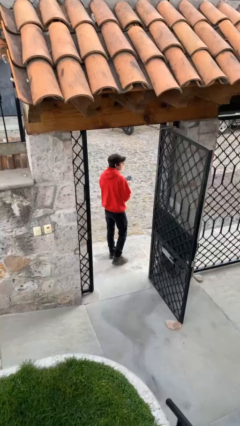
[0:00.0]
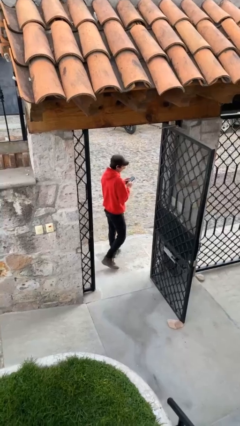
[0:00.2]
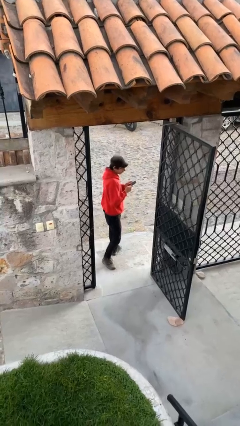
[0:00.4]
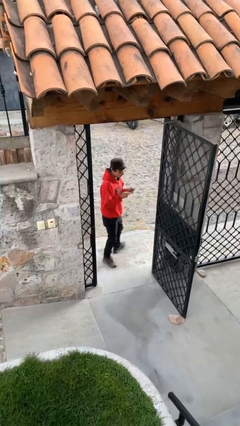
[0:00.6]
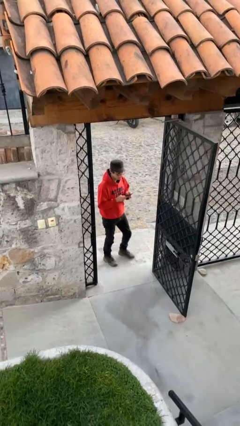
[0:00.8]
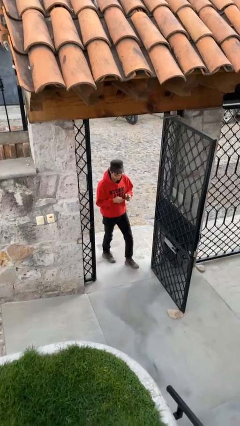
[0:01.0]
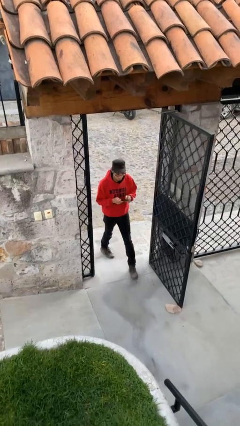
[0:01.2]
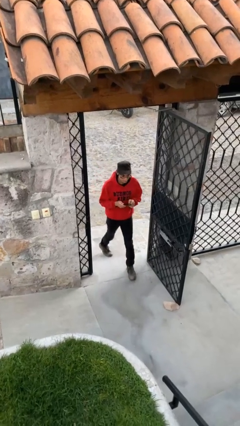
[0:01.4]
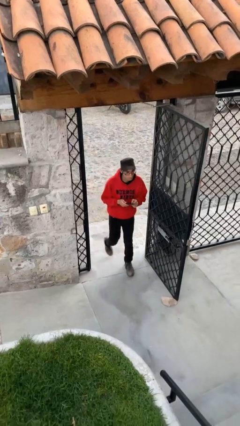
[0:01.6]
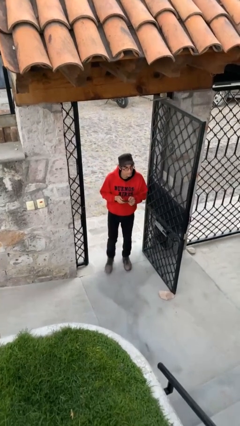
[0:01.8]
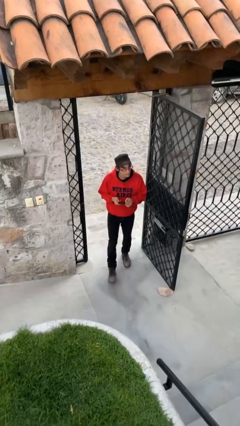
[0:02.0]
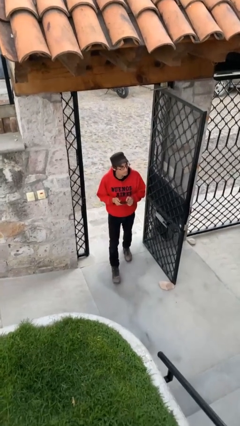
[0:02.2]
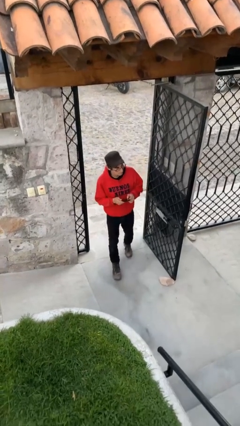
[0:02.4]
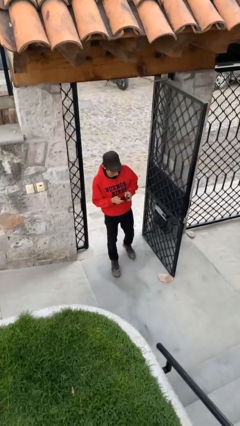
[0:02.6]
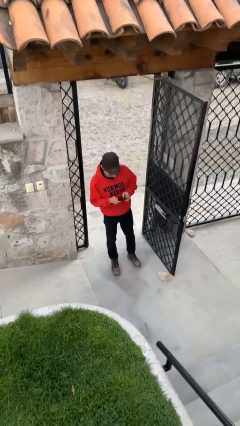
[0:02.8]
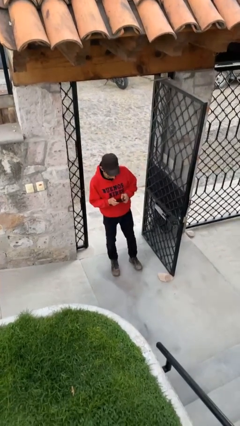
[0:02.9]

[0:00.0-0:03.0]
person enters scene through structure

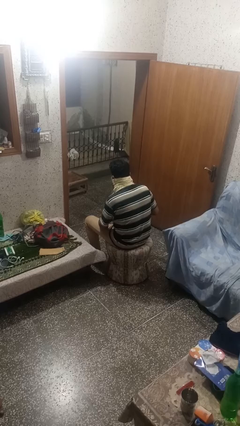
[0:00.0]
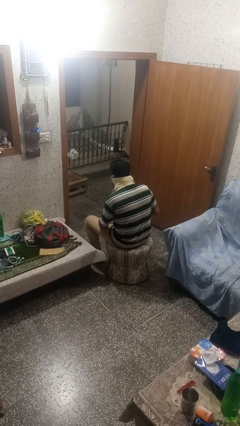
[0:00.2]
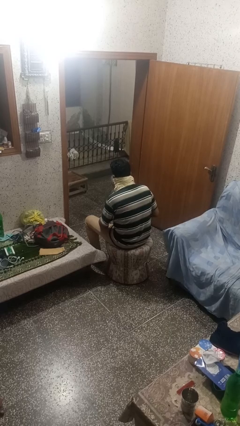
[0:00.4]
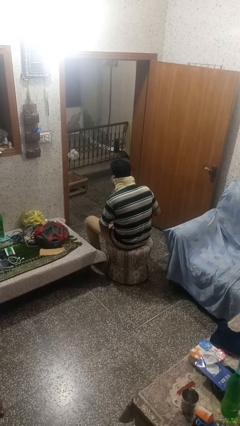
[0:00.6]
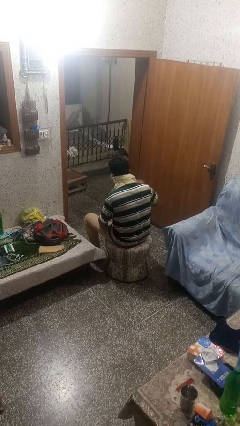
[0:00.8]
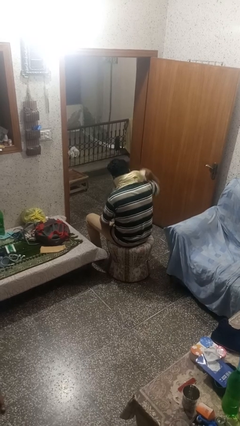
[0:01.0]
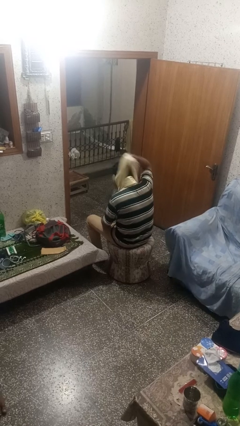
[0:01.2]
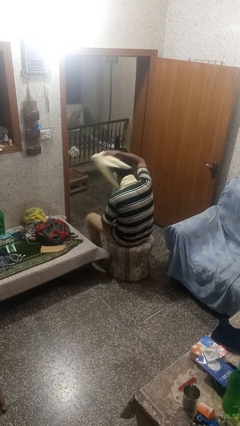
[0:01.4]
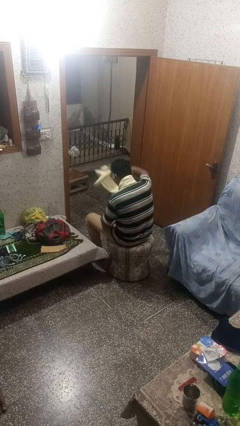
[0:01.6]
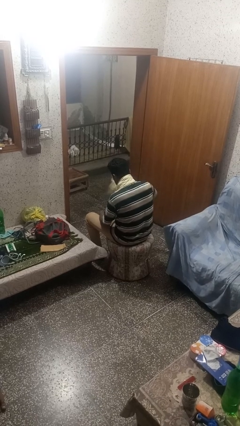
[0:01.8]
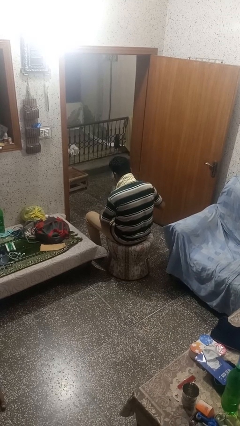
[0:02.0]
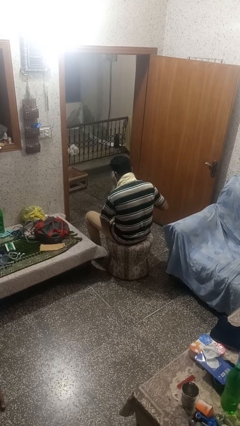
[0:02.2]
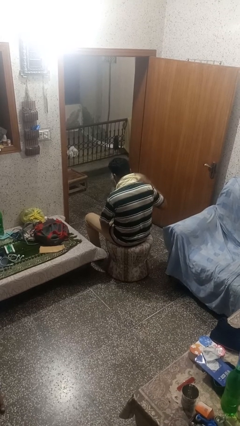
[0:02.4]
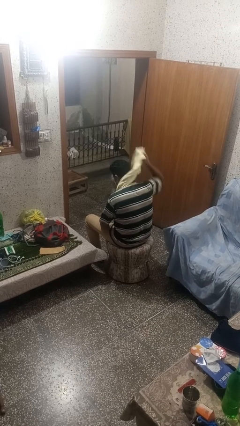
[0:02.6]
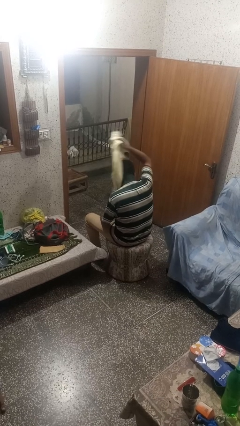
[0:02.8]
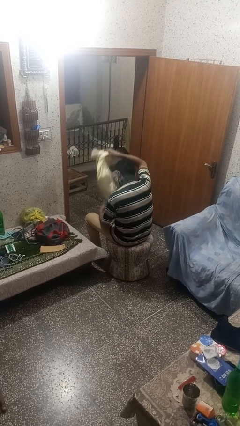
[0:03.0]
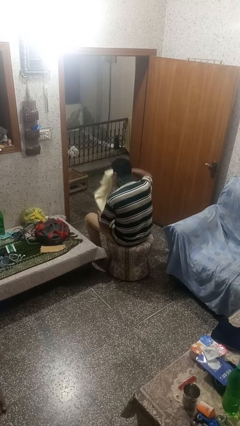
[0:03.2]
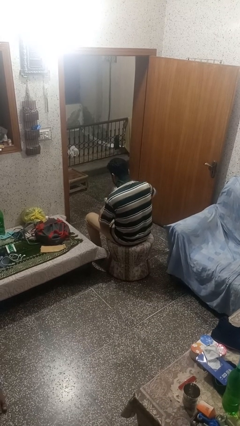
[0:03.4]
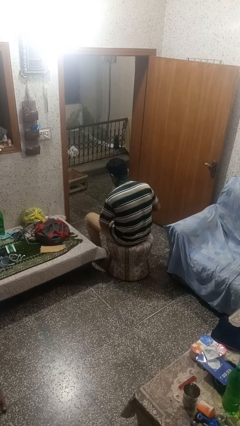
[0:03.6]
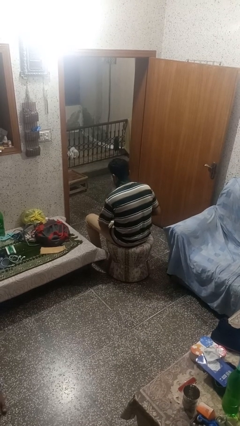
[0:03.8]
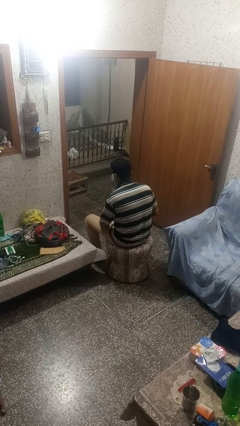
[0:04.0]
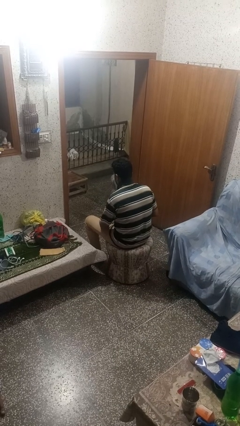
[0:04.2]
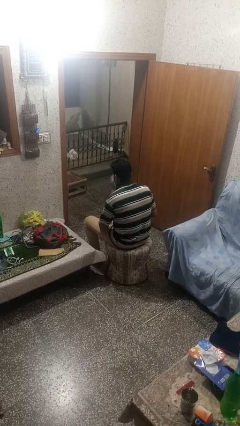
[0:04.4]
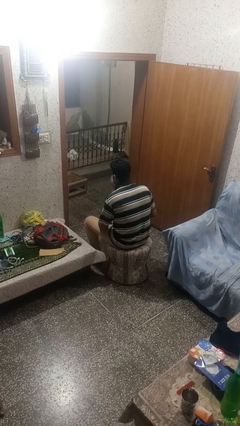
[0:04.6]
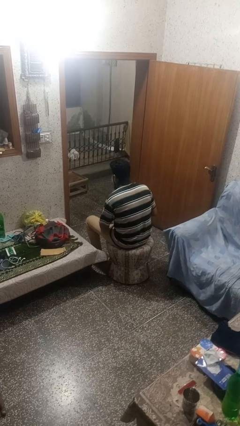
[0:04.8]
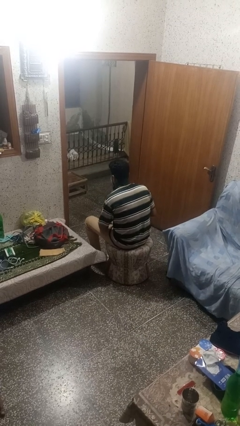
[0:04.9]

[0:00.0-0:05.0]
person takes off scarf

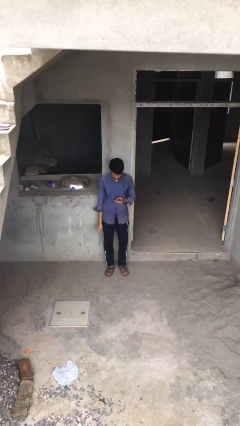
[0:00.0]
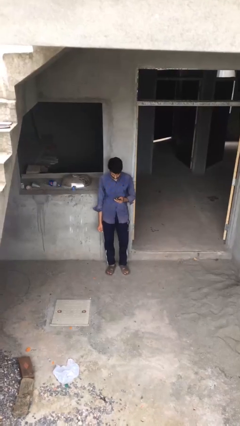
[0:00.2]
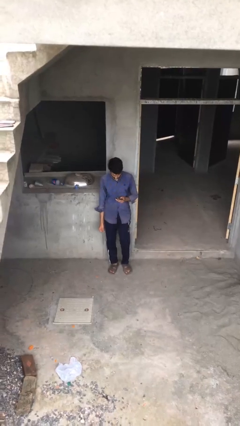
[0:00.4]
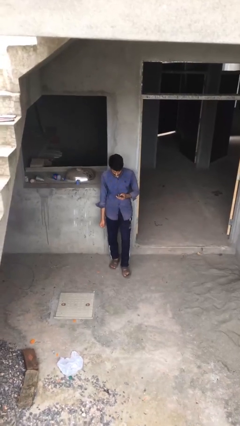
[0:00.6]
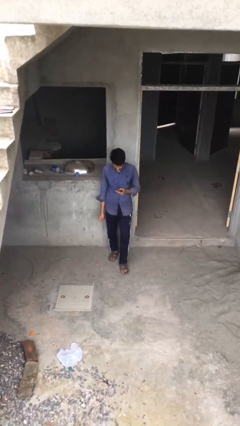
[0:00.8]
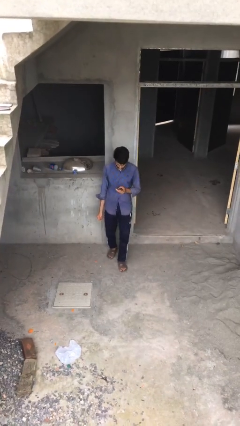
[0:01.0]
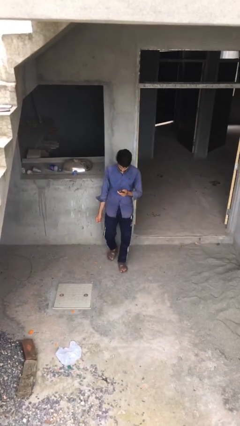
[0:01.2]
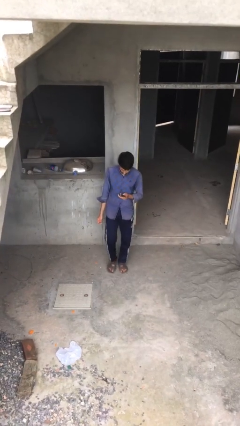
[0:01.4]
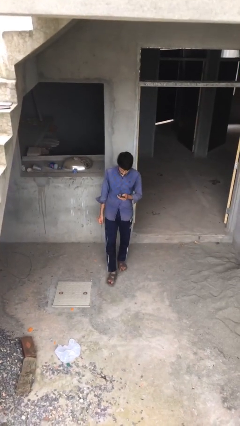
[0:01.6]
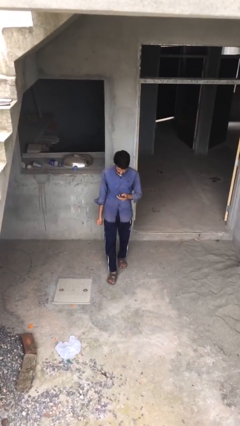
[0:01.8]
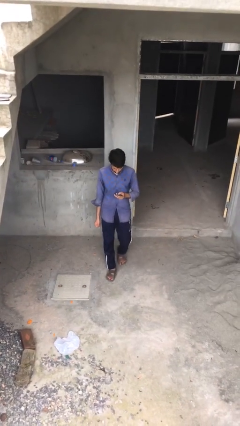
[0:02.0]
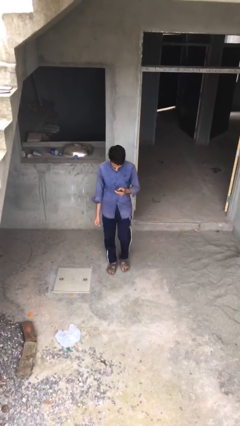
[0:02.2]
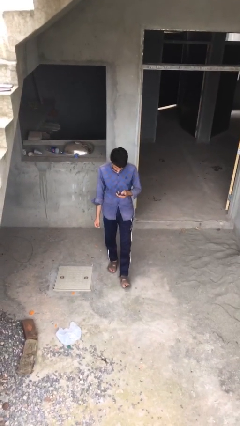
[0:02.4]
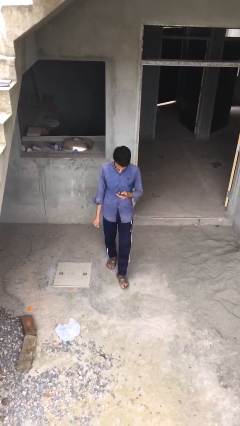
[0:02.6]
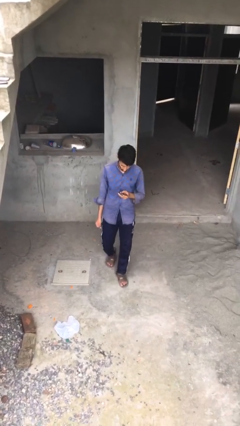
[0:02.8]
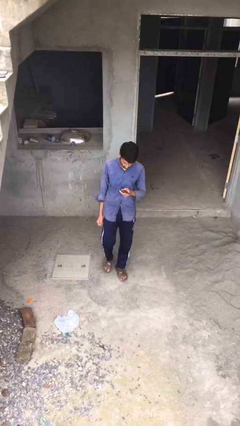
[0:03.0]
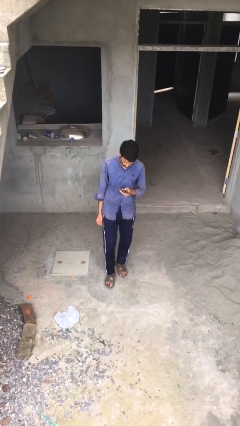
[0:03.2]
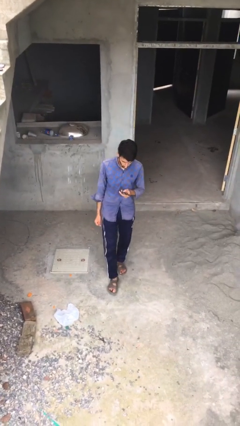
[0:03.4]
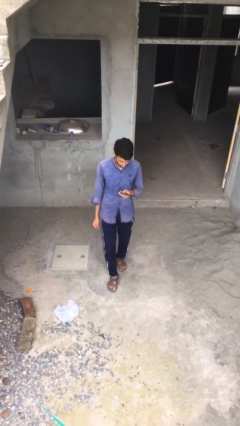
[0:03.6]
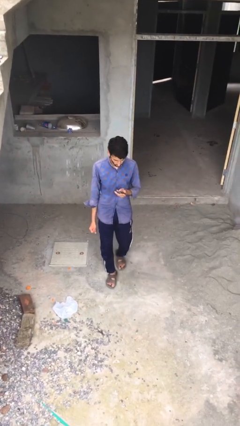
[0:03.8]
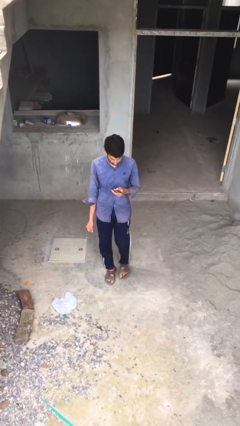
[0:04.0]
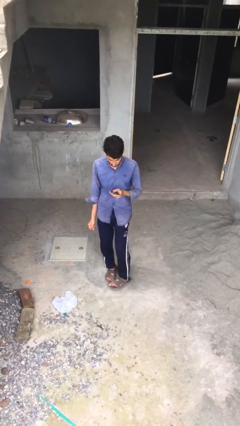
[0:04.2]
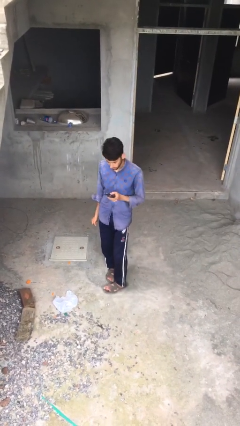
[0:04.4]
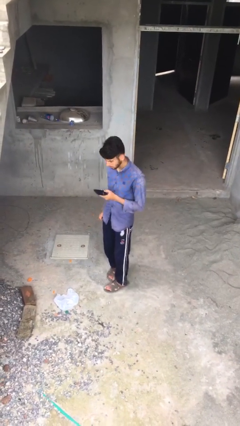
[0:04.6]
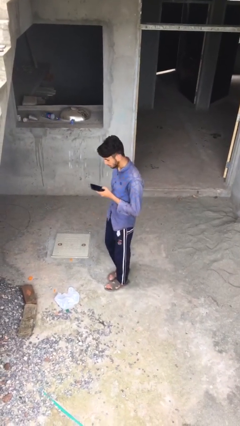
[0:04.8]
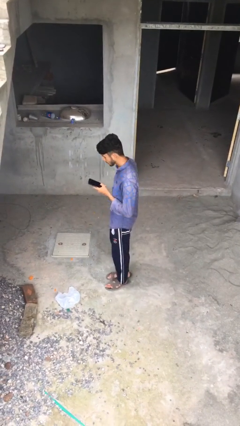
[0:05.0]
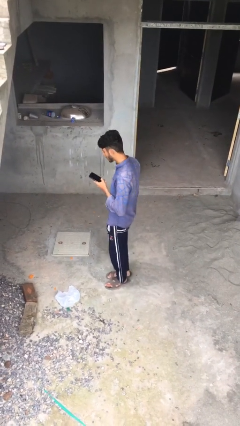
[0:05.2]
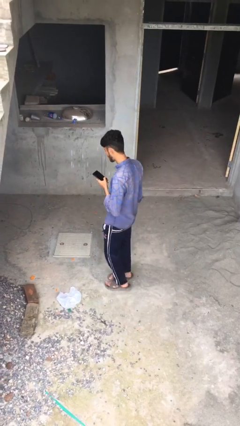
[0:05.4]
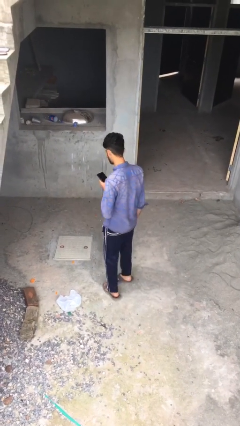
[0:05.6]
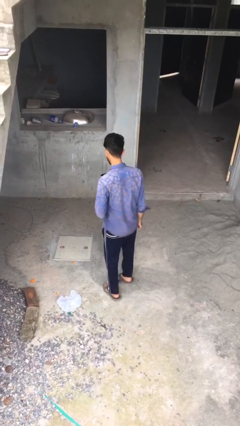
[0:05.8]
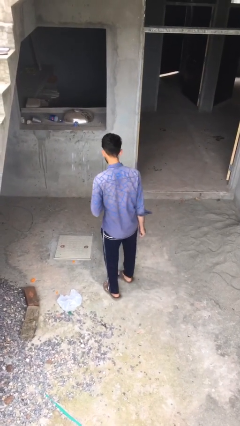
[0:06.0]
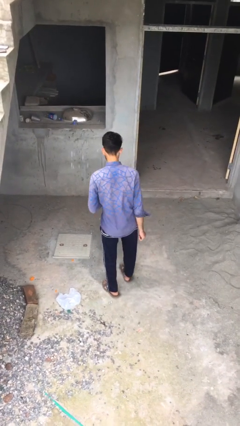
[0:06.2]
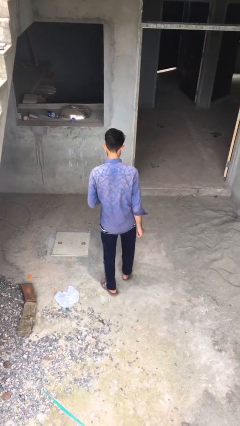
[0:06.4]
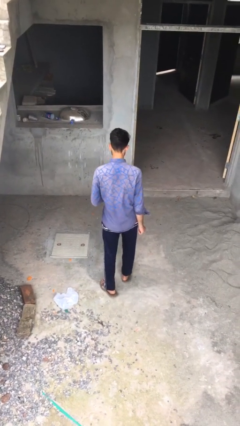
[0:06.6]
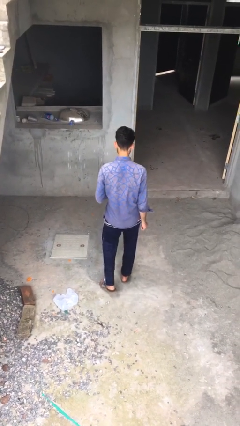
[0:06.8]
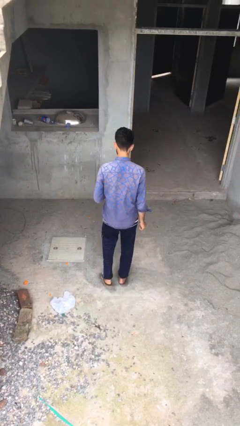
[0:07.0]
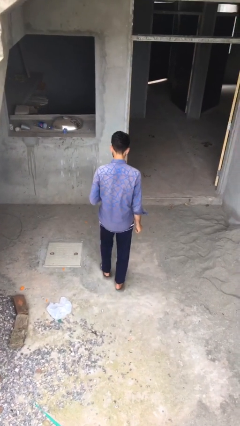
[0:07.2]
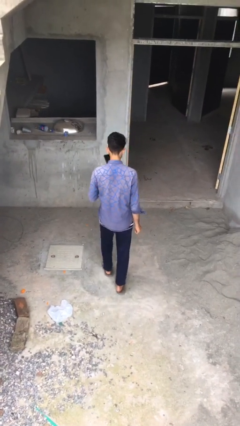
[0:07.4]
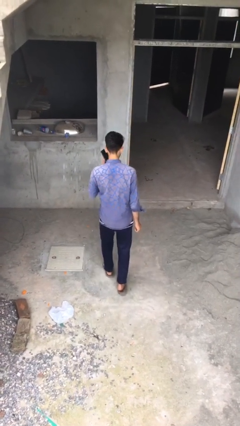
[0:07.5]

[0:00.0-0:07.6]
person texts on phone

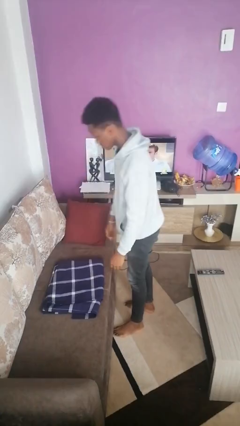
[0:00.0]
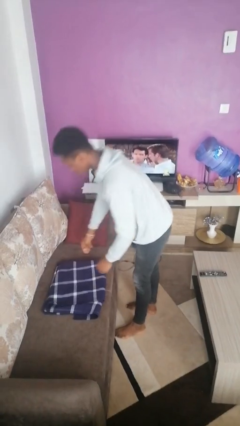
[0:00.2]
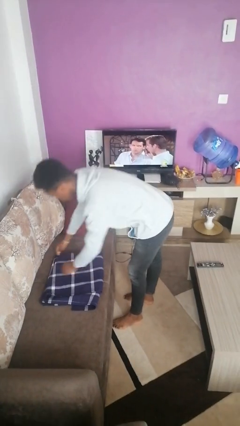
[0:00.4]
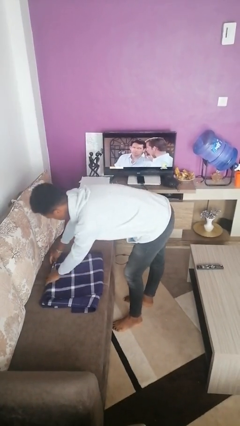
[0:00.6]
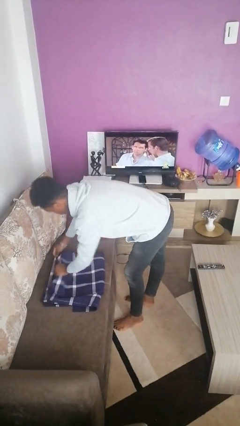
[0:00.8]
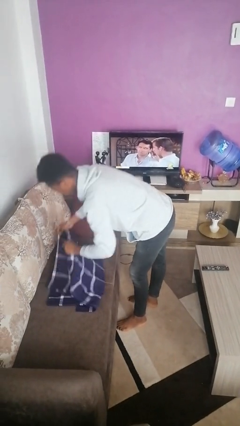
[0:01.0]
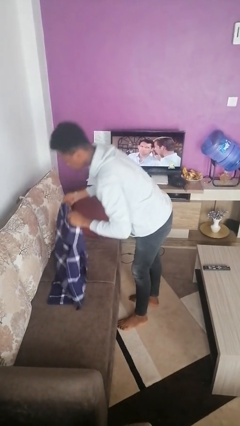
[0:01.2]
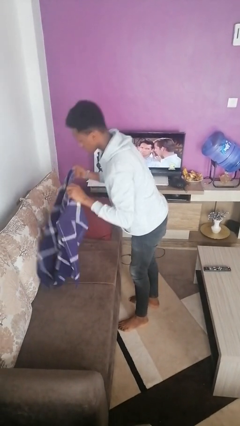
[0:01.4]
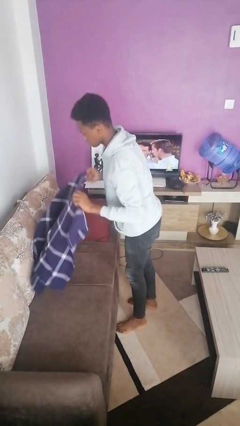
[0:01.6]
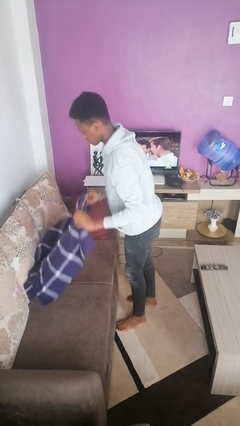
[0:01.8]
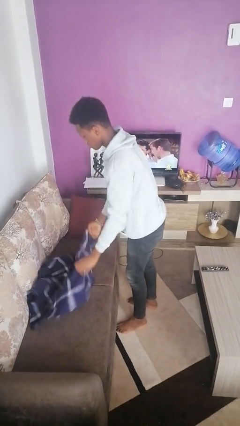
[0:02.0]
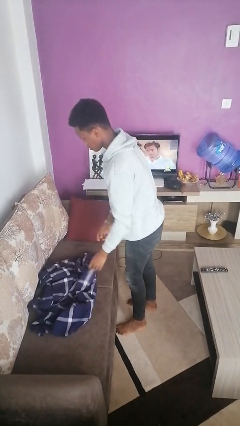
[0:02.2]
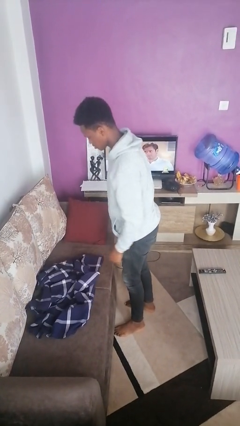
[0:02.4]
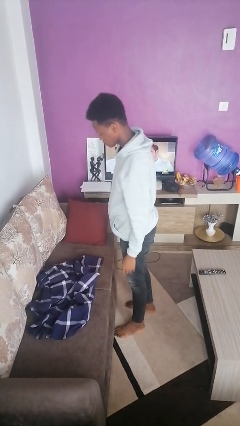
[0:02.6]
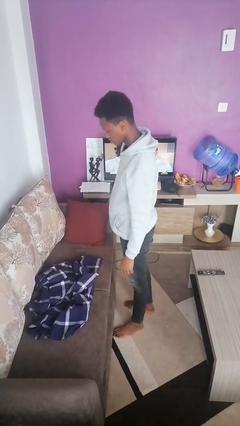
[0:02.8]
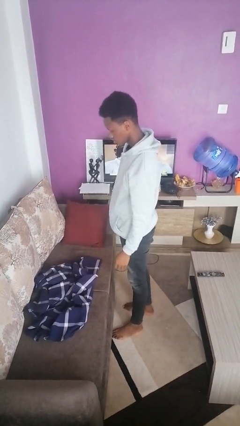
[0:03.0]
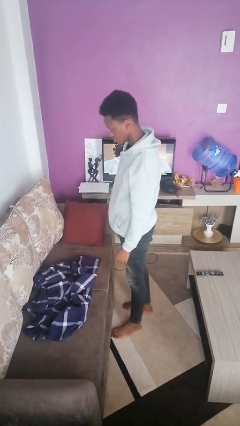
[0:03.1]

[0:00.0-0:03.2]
person unfolds blanket
